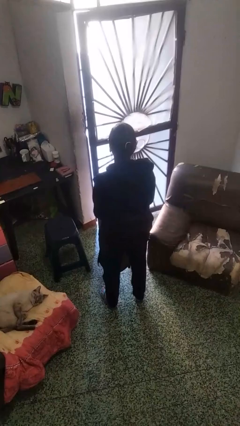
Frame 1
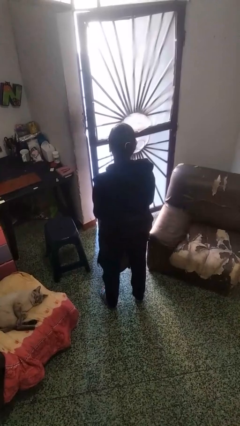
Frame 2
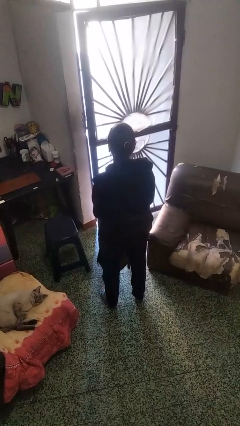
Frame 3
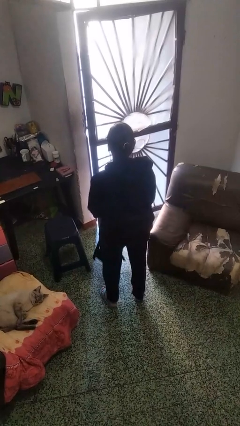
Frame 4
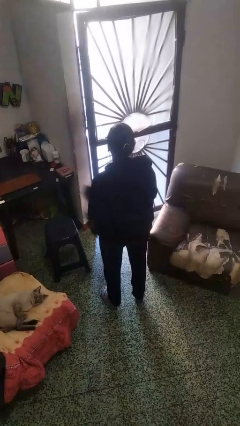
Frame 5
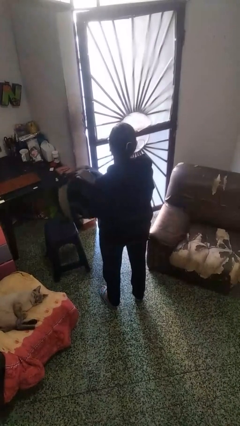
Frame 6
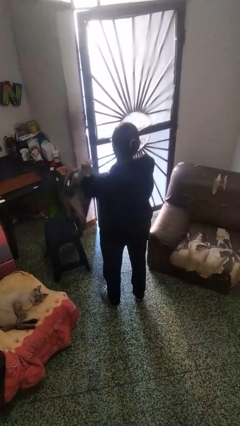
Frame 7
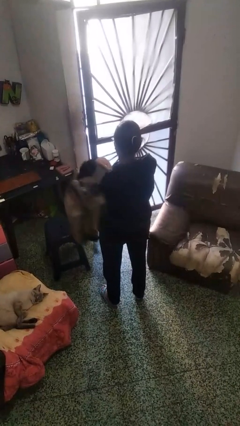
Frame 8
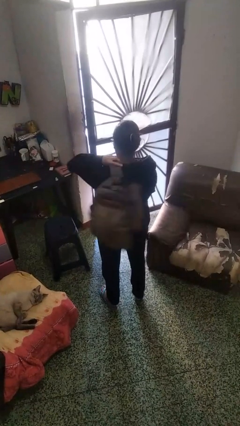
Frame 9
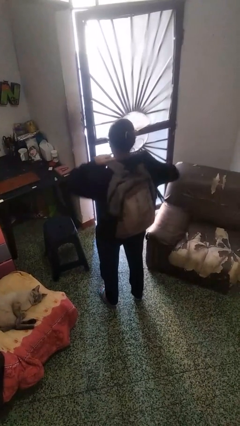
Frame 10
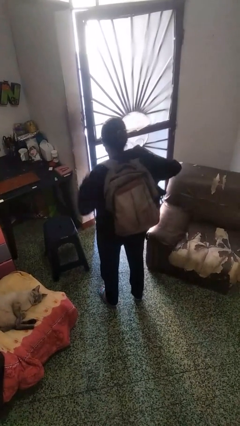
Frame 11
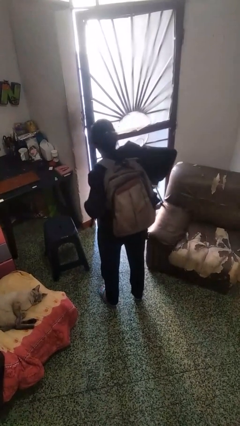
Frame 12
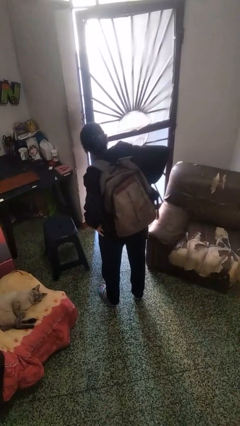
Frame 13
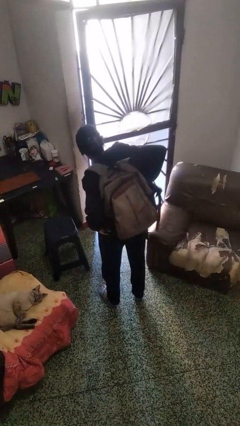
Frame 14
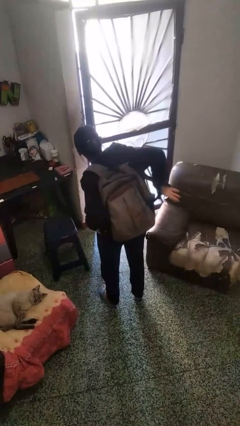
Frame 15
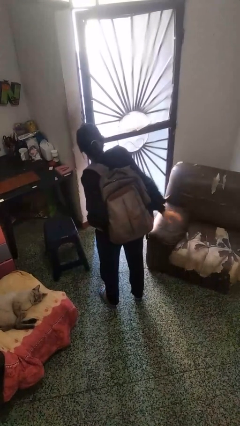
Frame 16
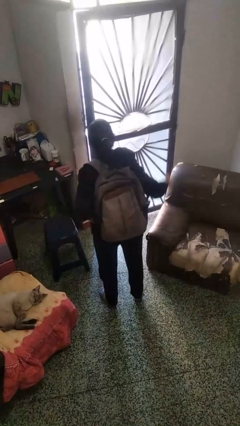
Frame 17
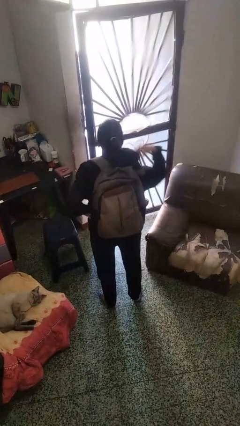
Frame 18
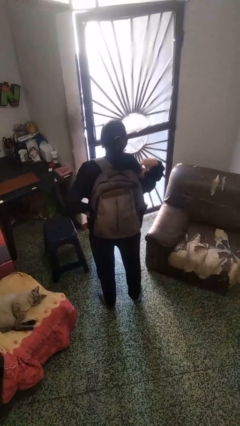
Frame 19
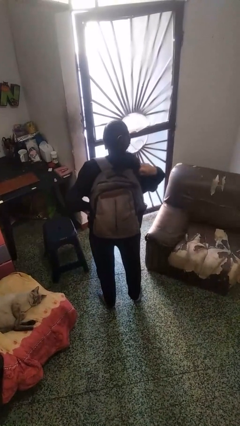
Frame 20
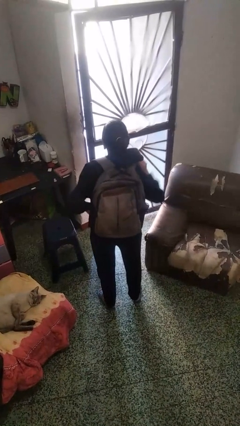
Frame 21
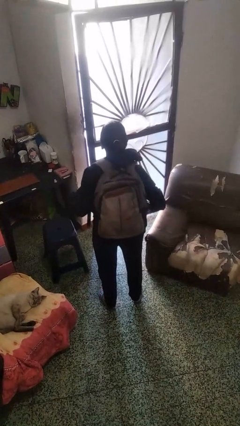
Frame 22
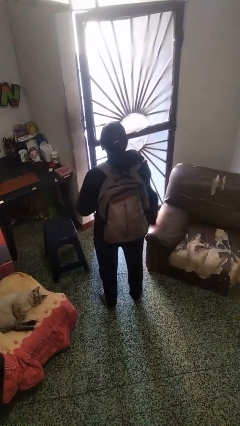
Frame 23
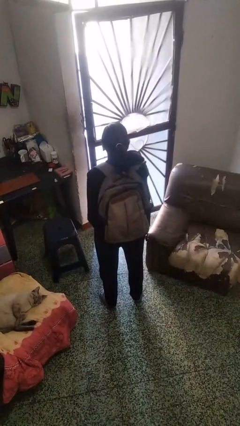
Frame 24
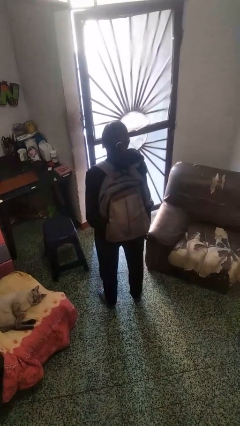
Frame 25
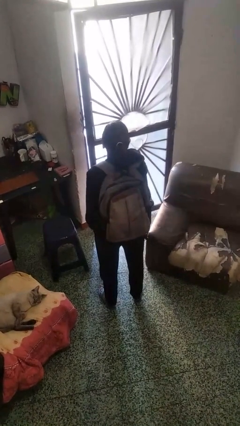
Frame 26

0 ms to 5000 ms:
person puts on backpack

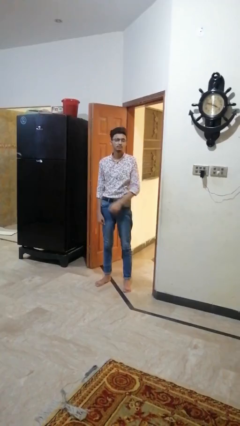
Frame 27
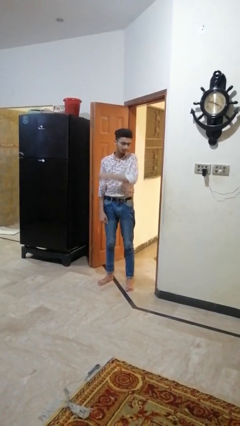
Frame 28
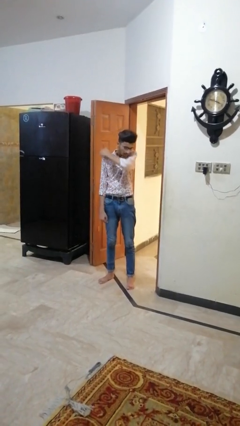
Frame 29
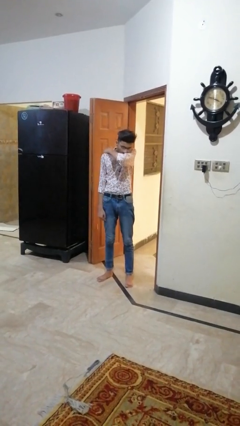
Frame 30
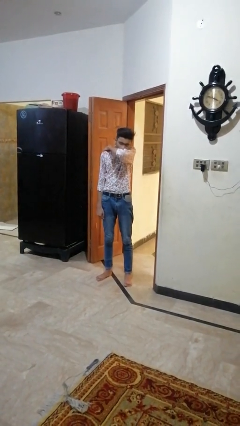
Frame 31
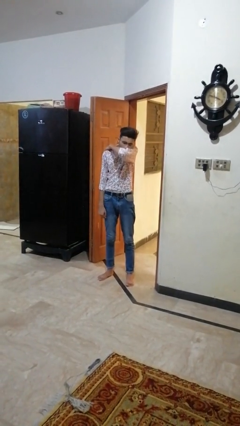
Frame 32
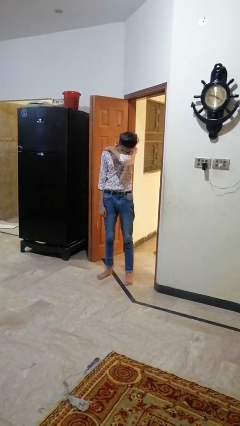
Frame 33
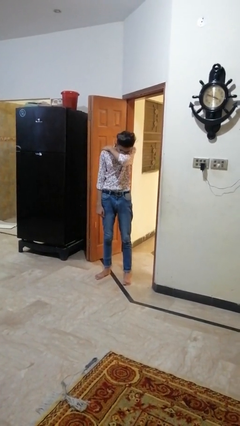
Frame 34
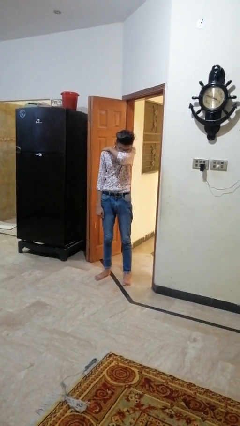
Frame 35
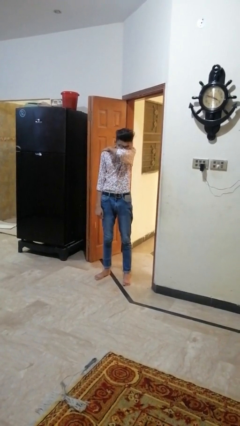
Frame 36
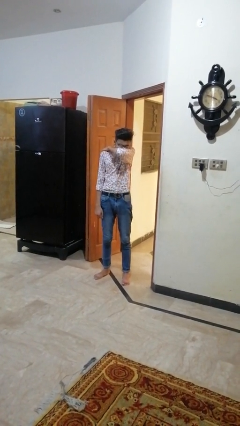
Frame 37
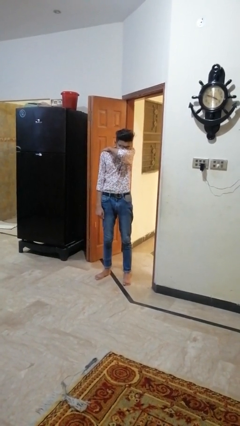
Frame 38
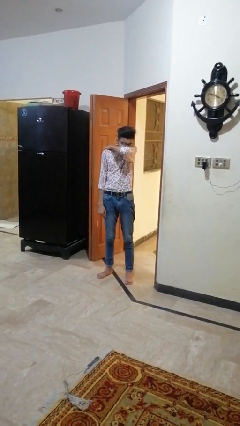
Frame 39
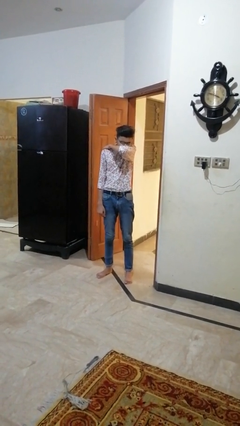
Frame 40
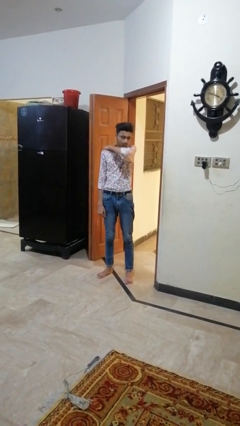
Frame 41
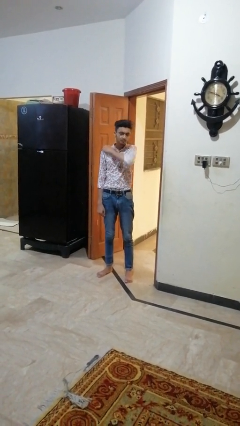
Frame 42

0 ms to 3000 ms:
person sneezes into arm

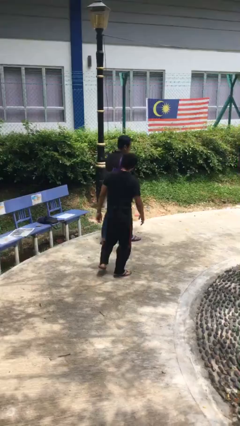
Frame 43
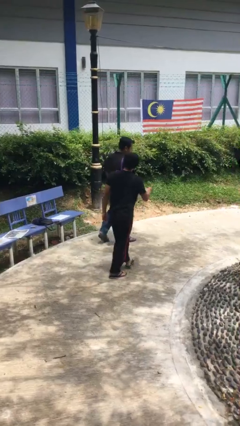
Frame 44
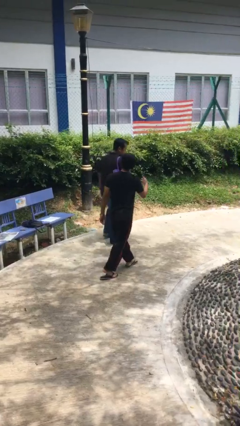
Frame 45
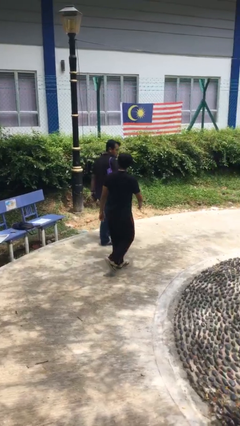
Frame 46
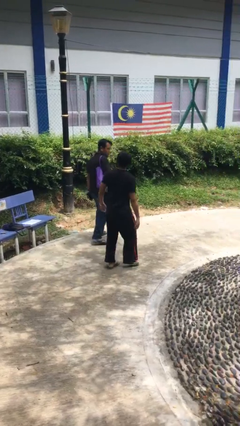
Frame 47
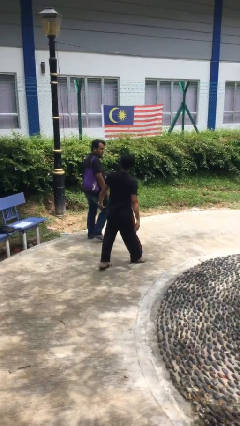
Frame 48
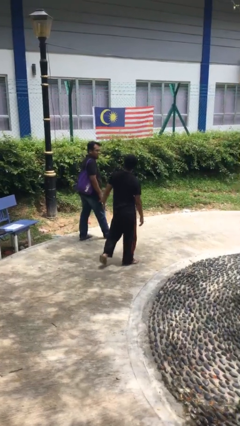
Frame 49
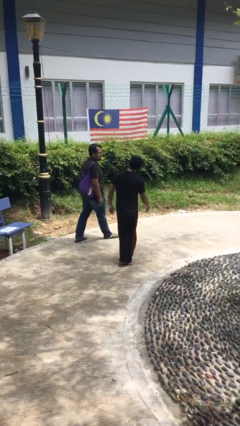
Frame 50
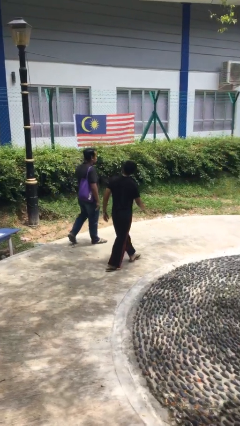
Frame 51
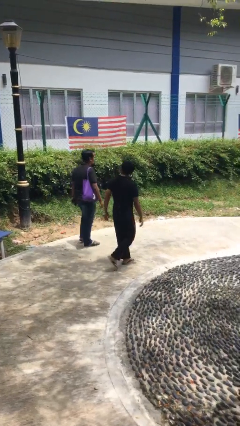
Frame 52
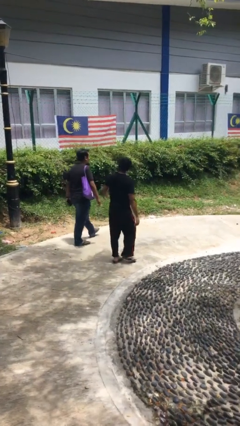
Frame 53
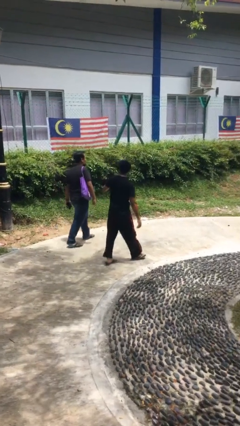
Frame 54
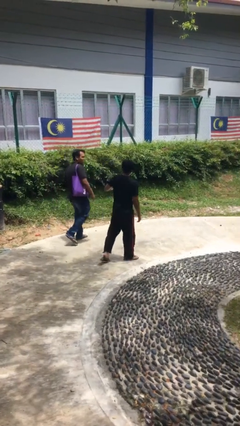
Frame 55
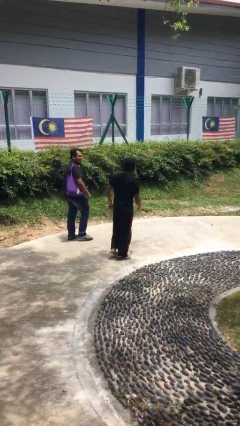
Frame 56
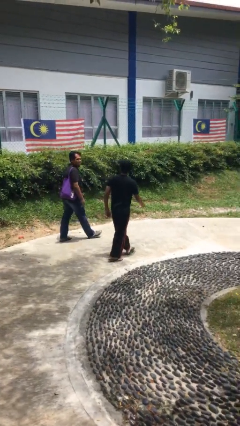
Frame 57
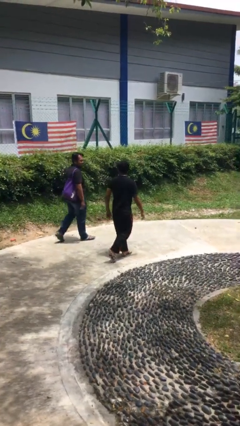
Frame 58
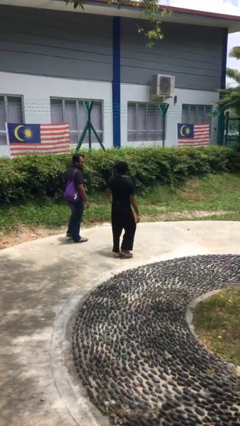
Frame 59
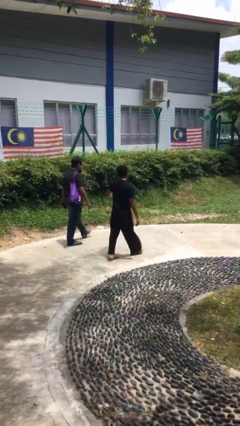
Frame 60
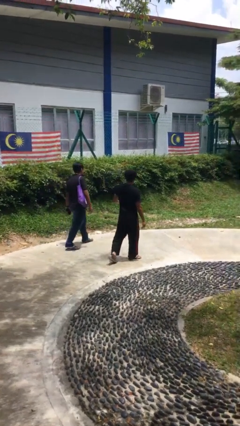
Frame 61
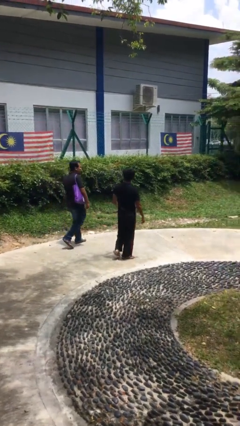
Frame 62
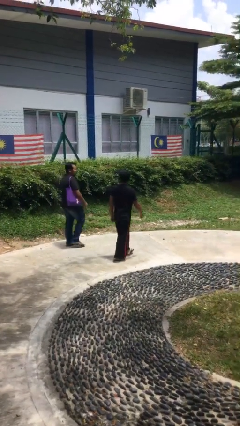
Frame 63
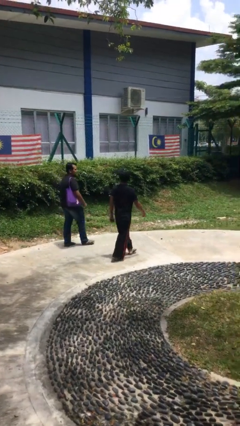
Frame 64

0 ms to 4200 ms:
person talks to person

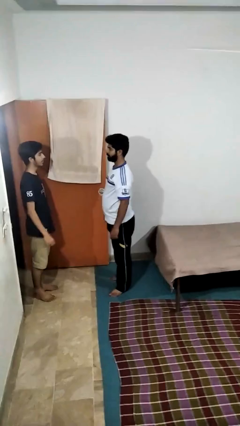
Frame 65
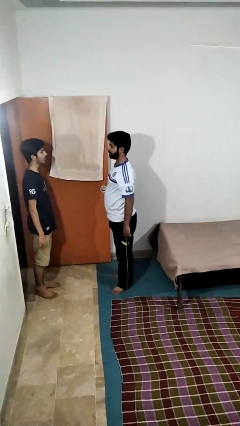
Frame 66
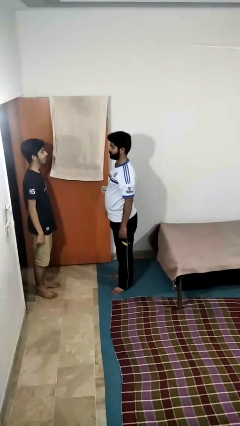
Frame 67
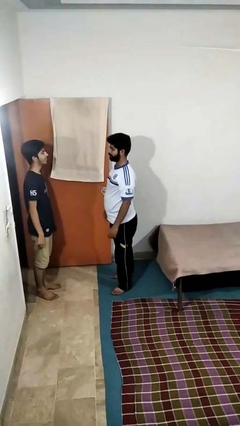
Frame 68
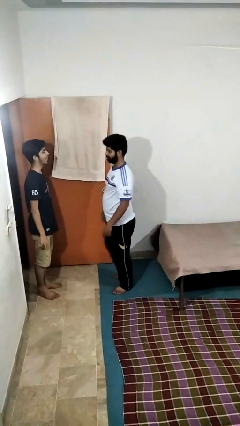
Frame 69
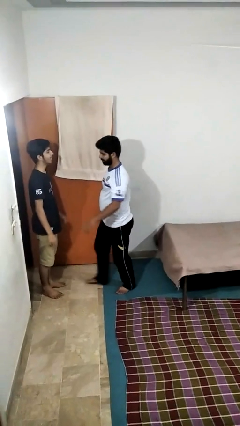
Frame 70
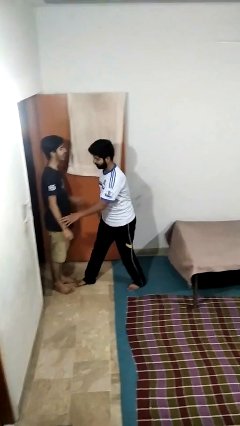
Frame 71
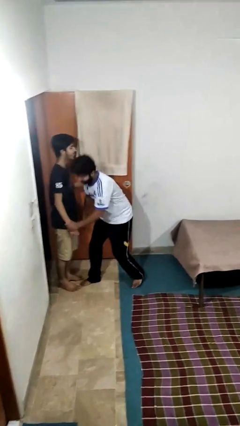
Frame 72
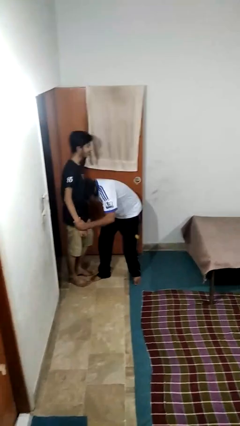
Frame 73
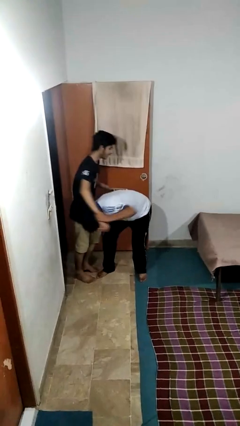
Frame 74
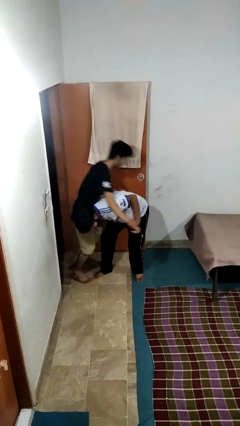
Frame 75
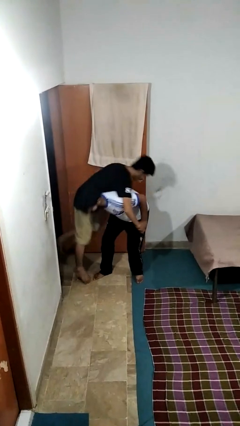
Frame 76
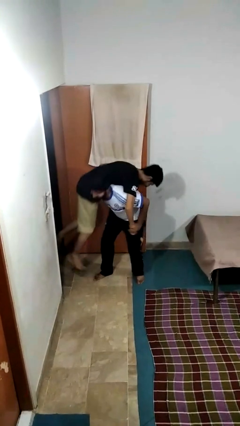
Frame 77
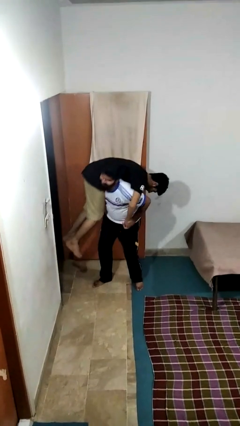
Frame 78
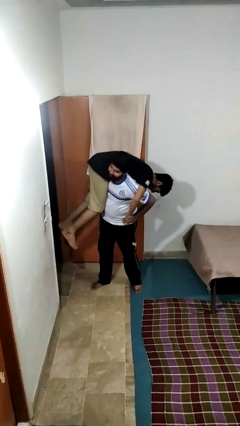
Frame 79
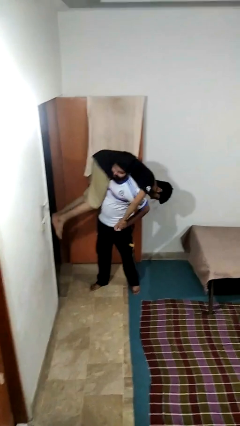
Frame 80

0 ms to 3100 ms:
person carries person over shoulder

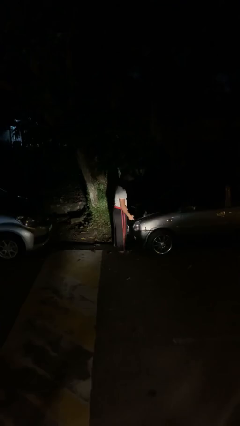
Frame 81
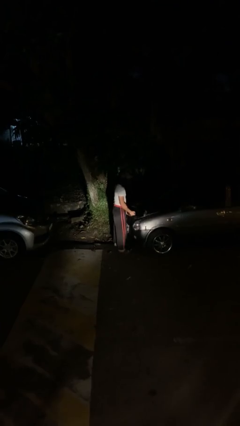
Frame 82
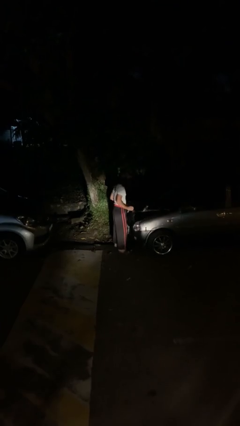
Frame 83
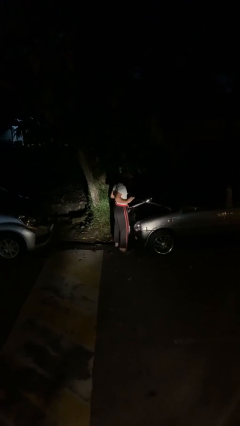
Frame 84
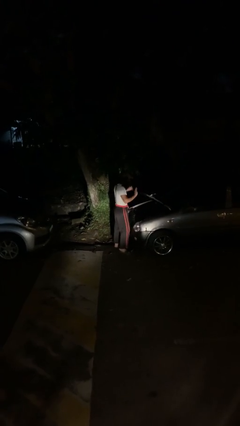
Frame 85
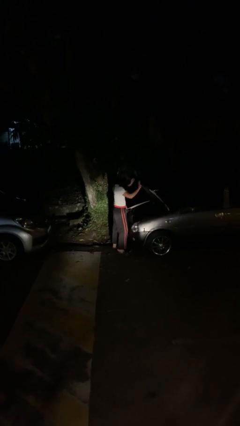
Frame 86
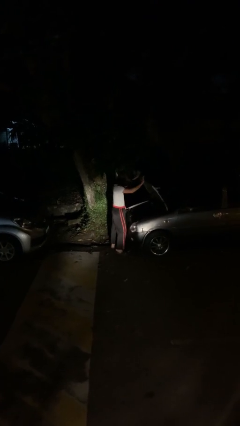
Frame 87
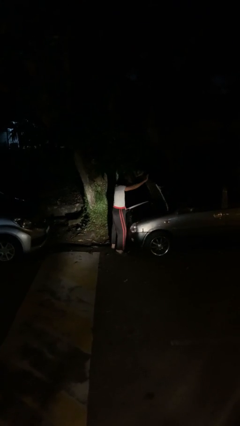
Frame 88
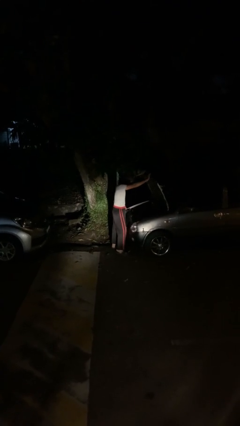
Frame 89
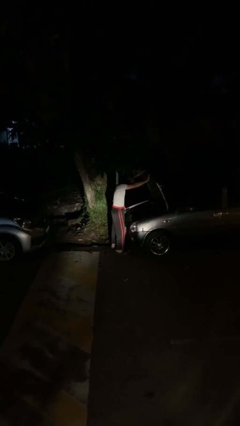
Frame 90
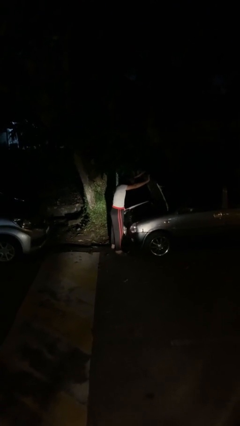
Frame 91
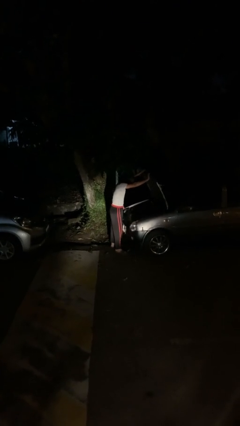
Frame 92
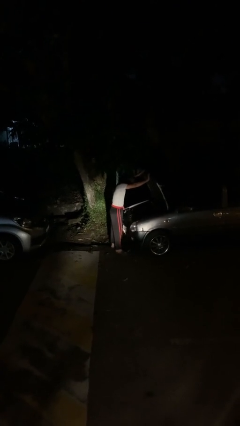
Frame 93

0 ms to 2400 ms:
person opens car hood

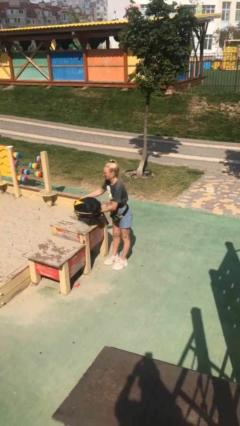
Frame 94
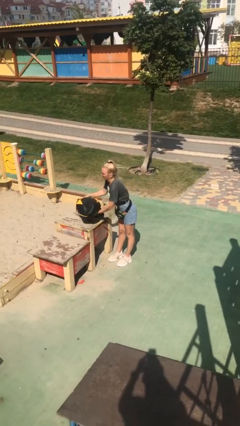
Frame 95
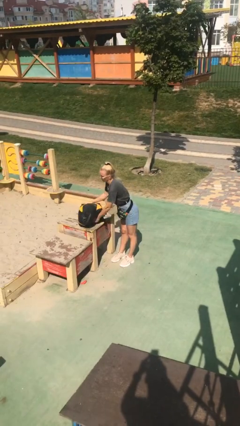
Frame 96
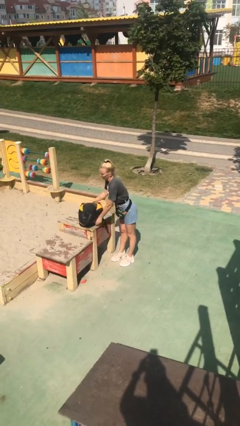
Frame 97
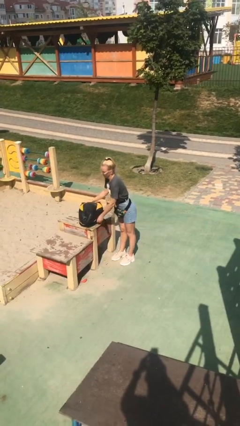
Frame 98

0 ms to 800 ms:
person puts down object on table
